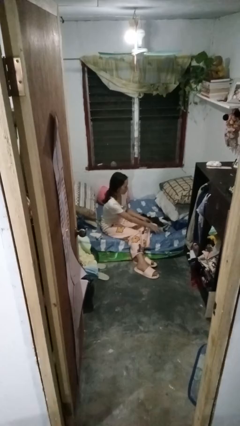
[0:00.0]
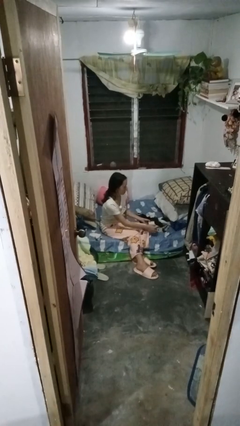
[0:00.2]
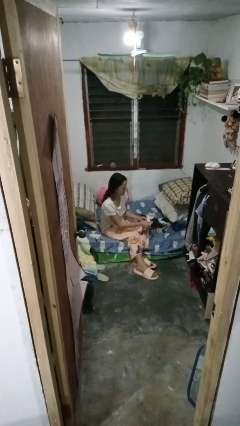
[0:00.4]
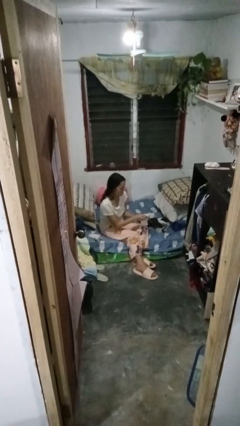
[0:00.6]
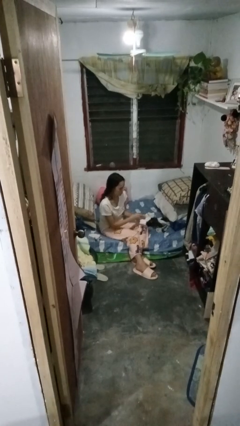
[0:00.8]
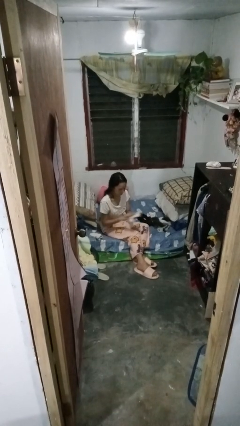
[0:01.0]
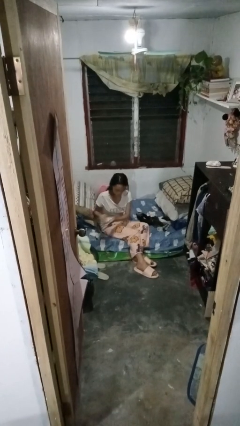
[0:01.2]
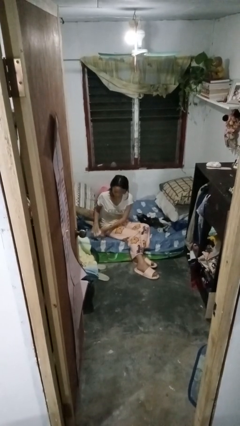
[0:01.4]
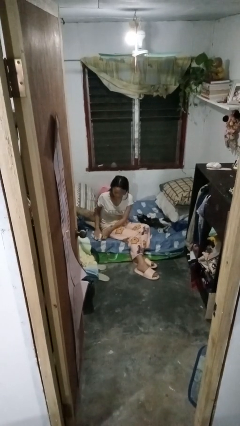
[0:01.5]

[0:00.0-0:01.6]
person folds socks

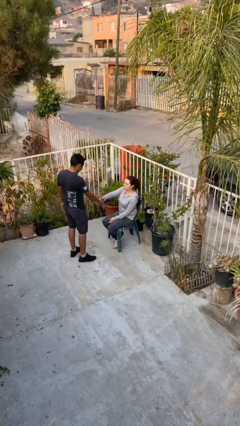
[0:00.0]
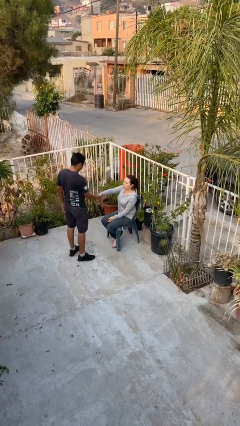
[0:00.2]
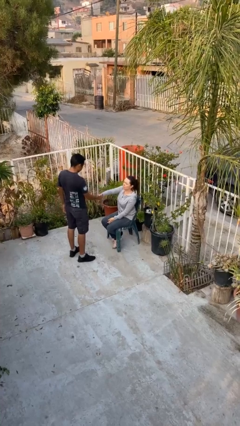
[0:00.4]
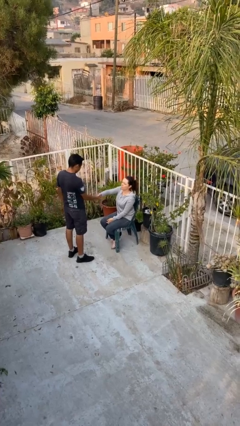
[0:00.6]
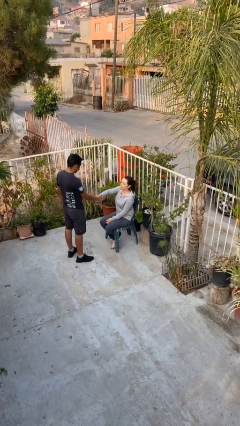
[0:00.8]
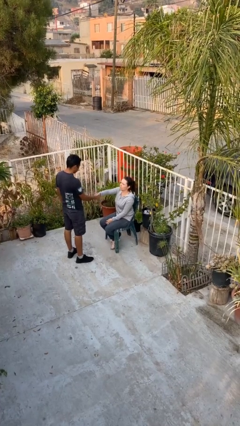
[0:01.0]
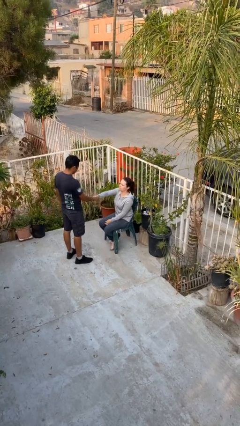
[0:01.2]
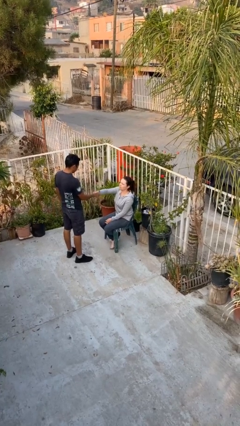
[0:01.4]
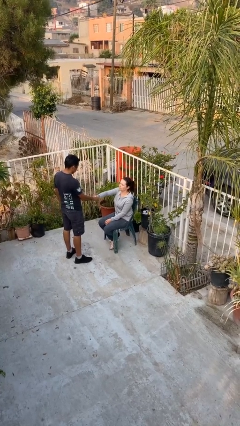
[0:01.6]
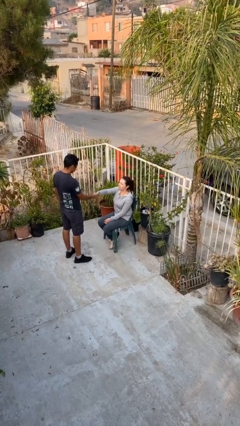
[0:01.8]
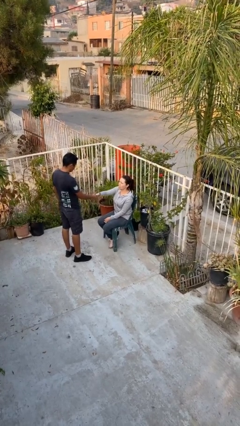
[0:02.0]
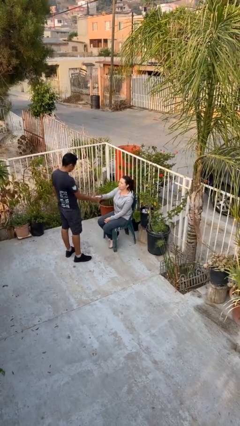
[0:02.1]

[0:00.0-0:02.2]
person shakes hand

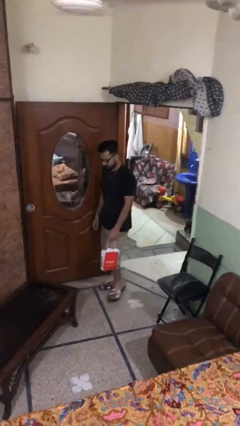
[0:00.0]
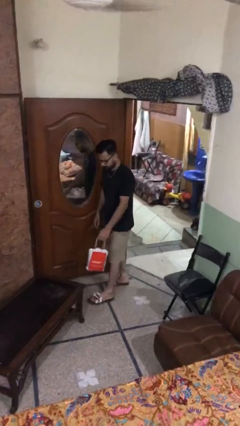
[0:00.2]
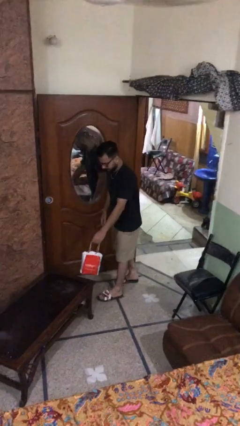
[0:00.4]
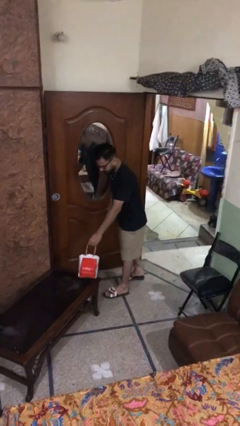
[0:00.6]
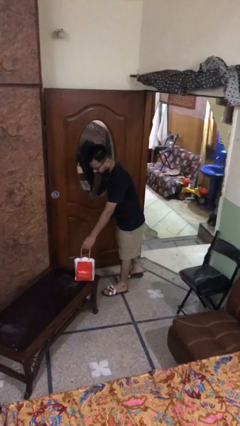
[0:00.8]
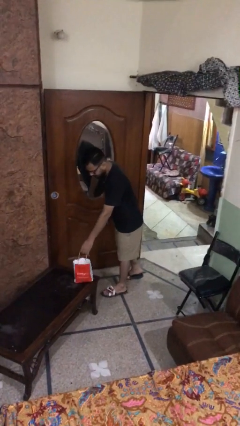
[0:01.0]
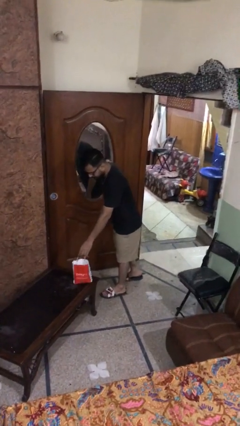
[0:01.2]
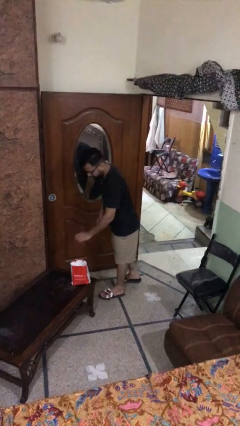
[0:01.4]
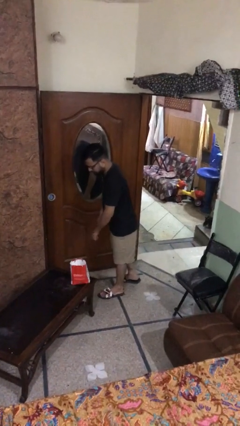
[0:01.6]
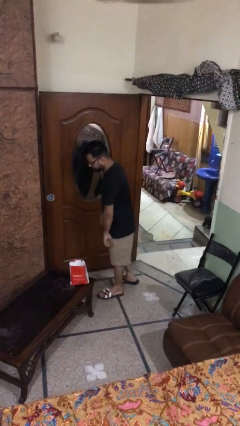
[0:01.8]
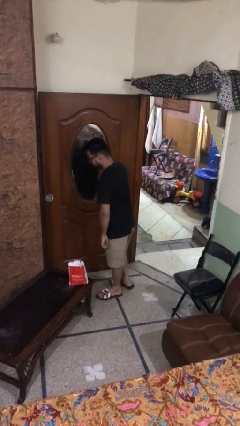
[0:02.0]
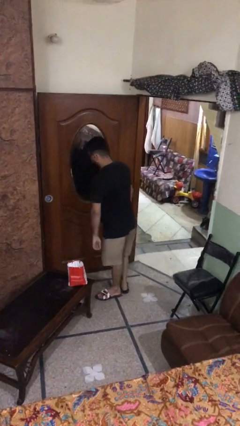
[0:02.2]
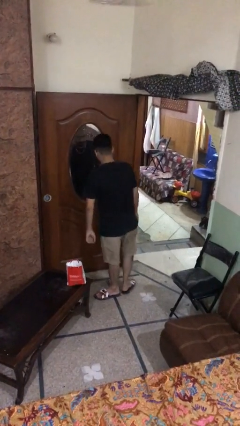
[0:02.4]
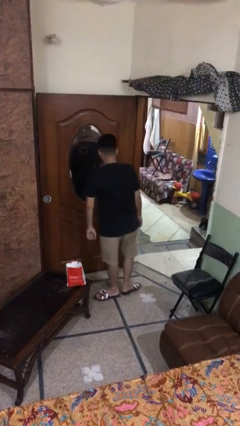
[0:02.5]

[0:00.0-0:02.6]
person puts down object on table

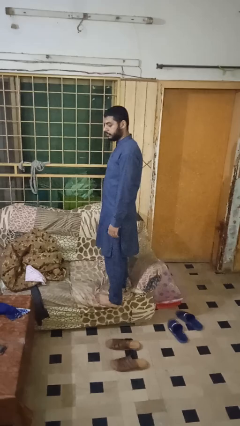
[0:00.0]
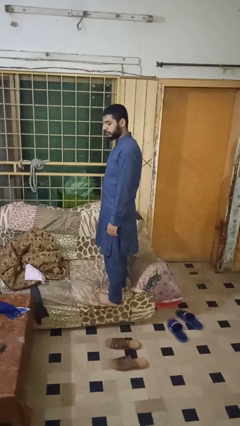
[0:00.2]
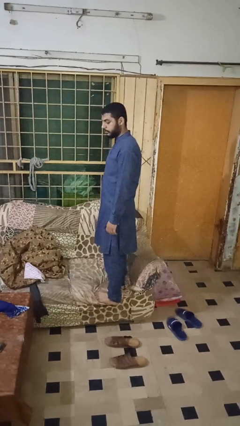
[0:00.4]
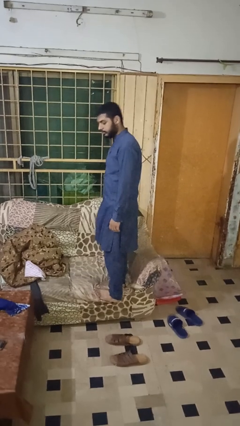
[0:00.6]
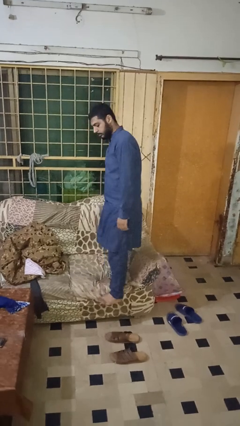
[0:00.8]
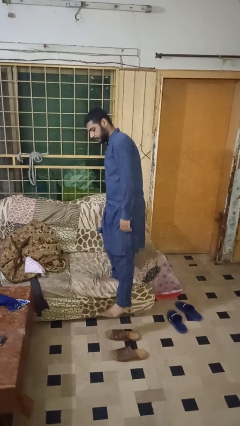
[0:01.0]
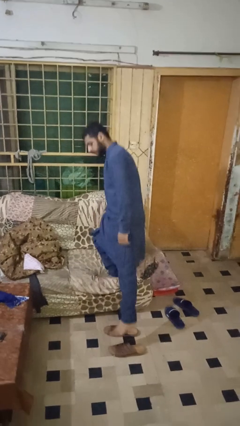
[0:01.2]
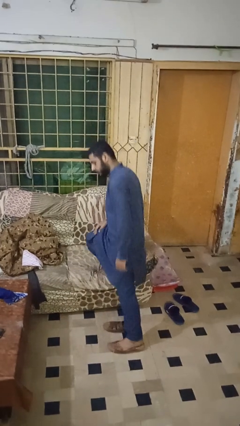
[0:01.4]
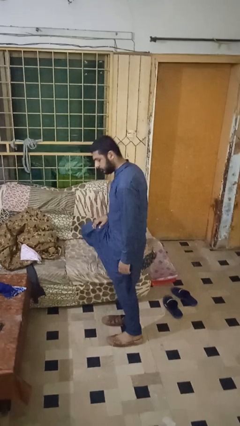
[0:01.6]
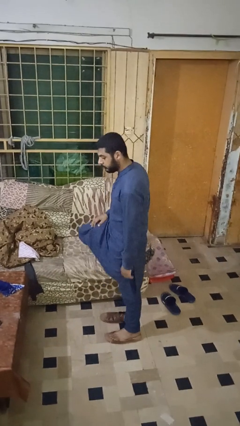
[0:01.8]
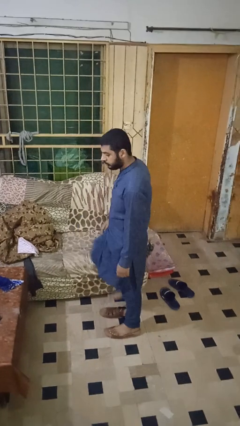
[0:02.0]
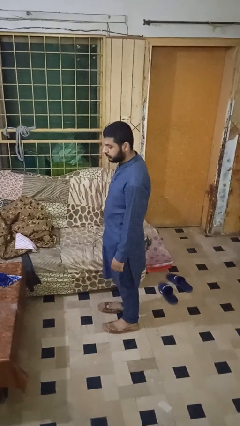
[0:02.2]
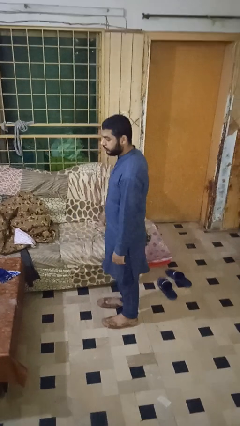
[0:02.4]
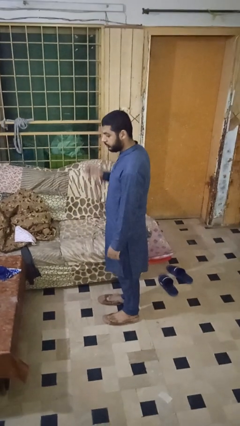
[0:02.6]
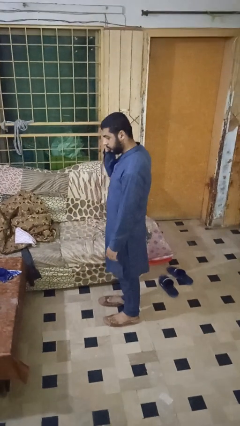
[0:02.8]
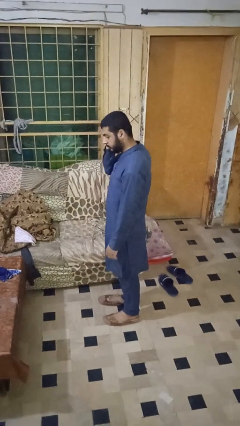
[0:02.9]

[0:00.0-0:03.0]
person climbs off couch

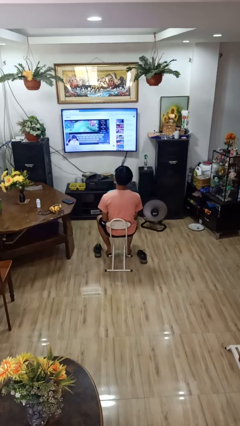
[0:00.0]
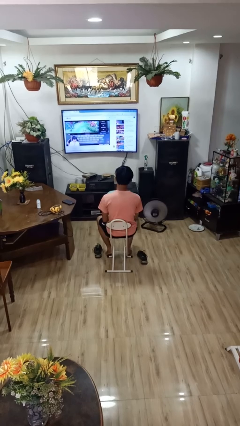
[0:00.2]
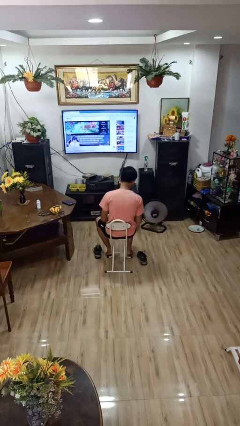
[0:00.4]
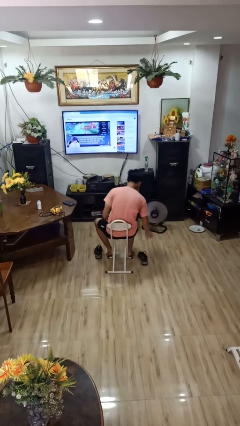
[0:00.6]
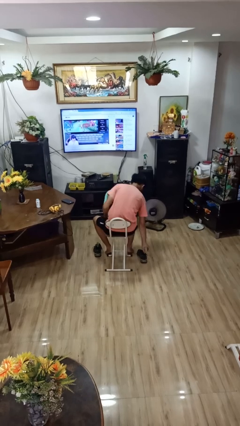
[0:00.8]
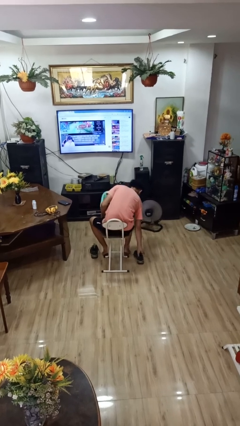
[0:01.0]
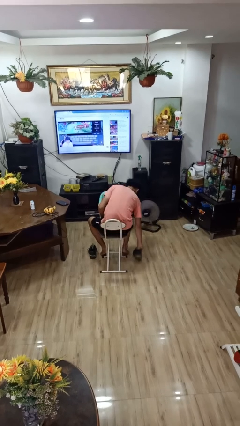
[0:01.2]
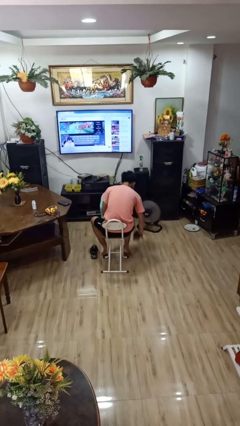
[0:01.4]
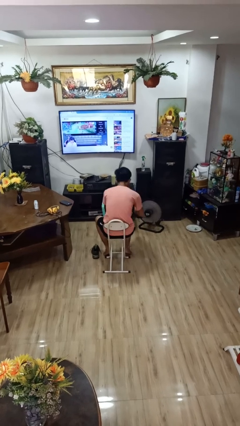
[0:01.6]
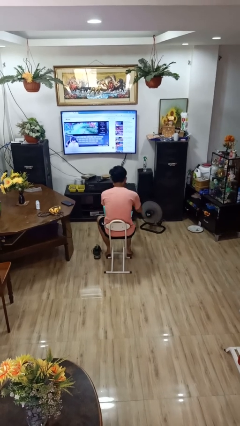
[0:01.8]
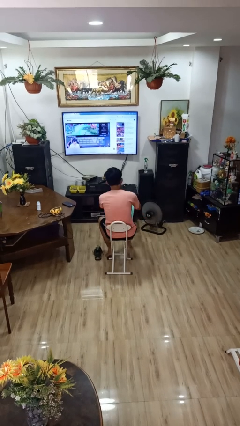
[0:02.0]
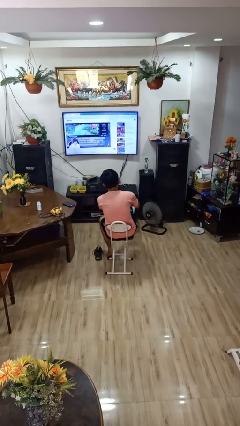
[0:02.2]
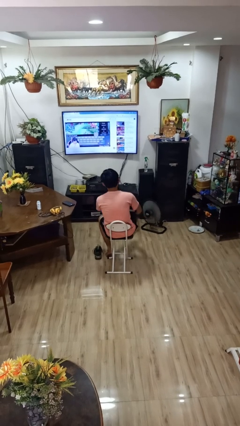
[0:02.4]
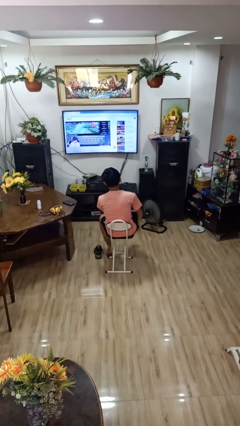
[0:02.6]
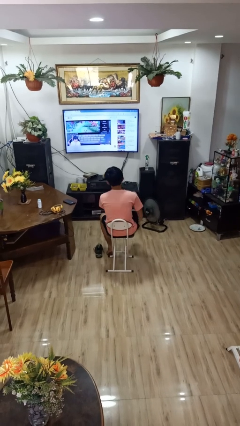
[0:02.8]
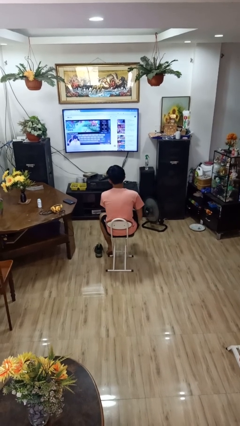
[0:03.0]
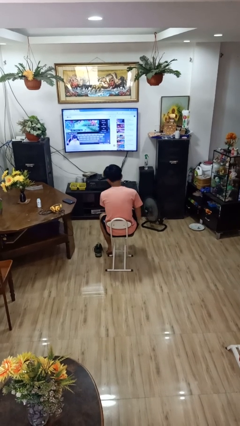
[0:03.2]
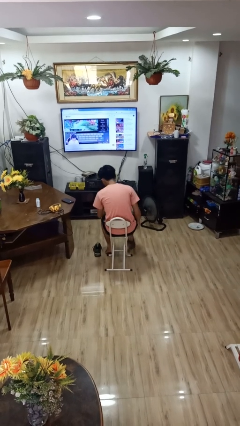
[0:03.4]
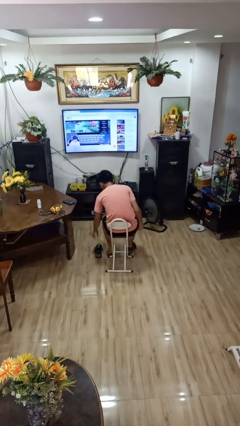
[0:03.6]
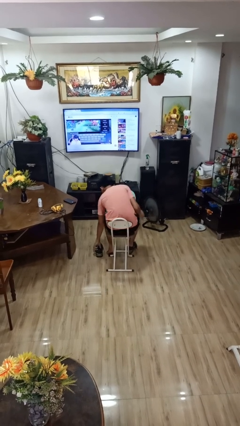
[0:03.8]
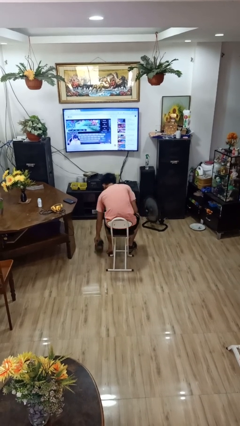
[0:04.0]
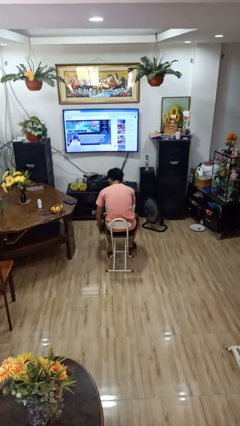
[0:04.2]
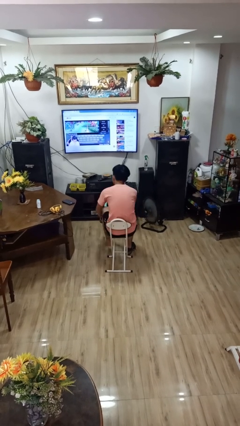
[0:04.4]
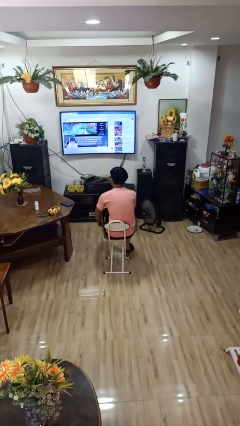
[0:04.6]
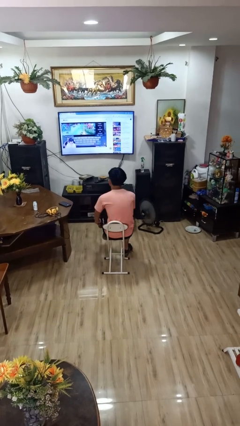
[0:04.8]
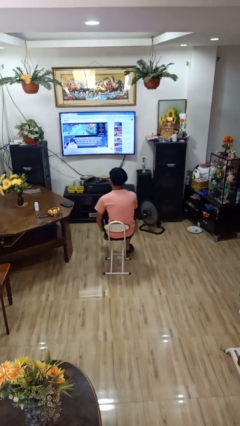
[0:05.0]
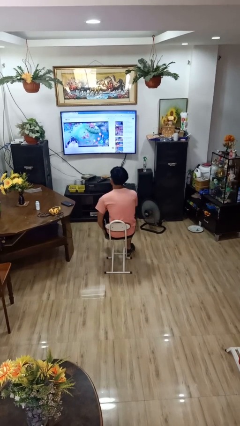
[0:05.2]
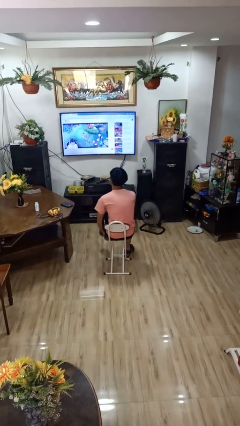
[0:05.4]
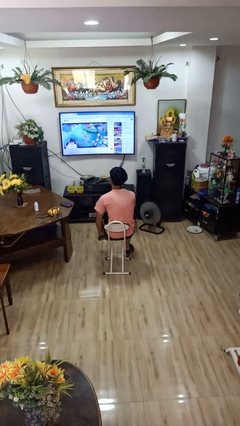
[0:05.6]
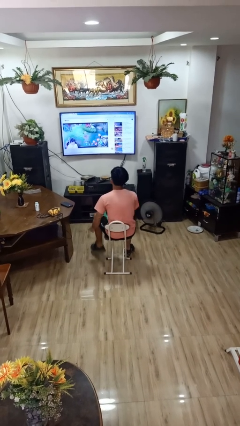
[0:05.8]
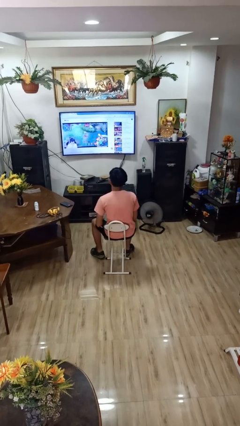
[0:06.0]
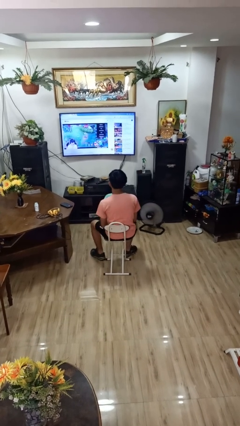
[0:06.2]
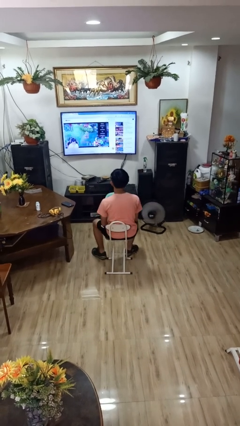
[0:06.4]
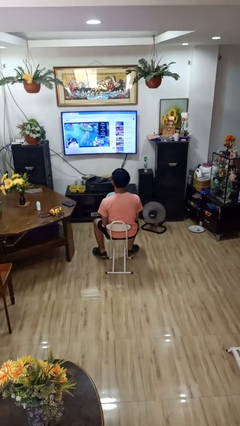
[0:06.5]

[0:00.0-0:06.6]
person puts on shoes

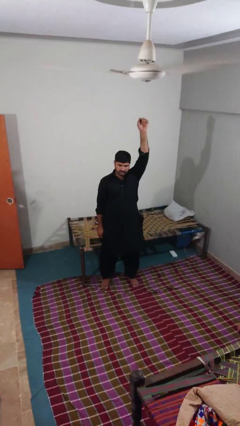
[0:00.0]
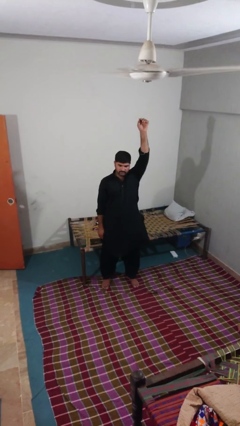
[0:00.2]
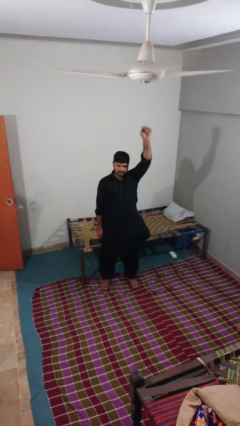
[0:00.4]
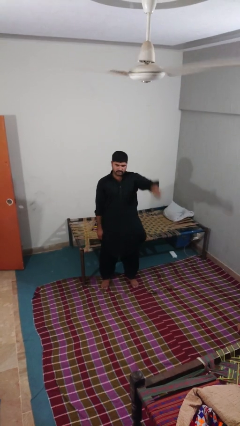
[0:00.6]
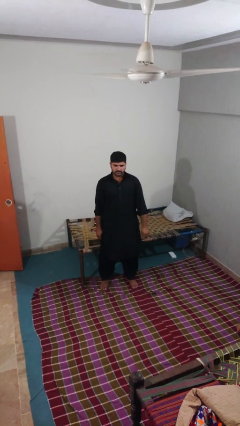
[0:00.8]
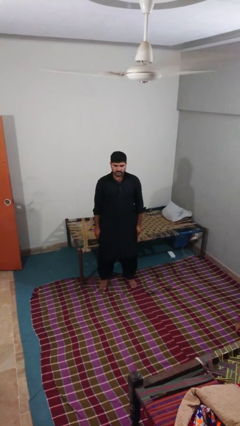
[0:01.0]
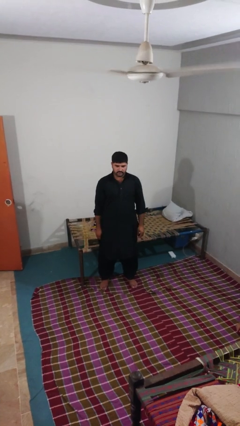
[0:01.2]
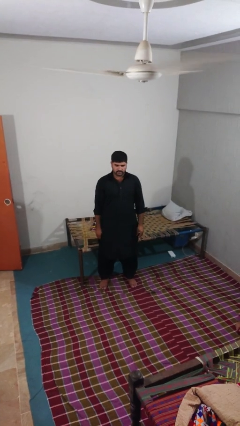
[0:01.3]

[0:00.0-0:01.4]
person gestures lower hand
